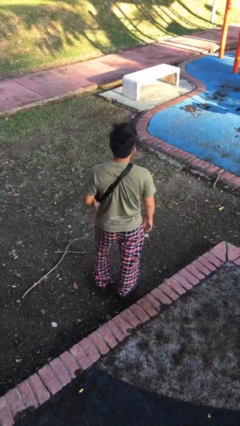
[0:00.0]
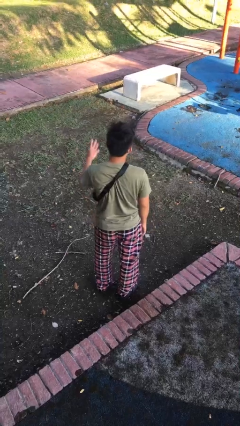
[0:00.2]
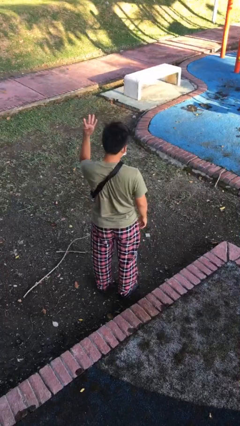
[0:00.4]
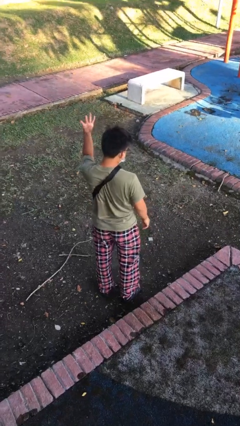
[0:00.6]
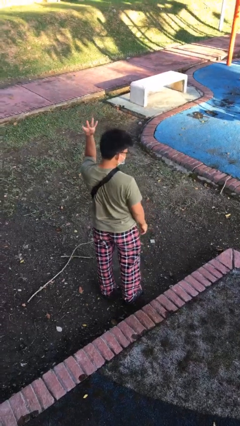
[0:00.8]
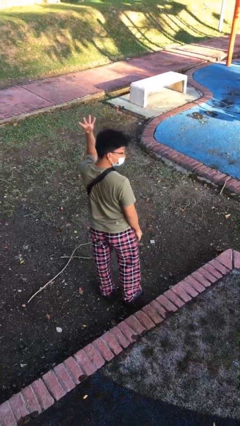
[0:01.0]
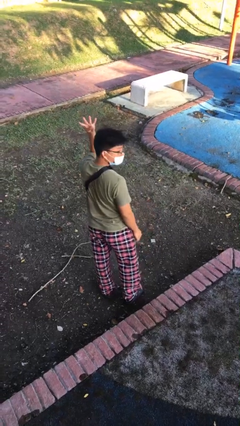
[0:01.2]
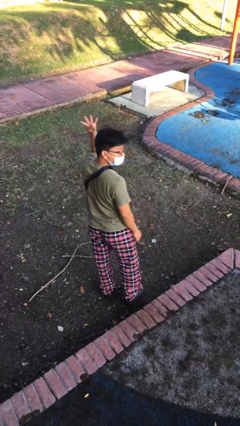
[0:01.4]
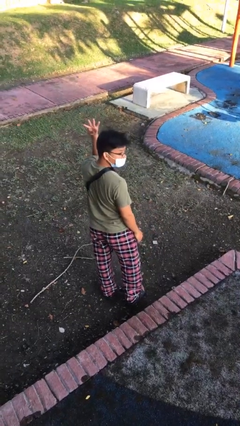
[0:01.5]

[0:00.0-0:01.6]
person gestures number four

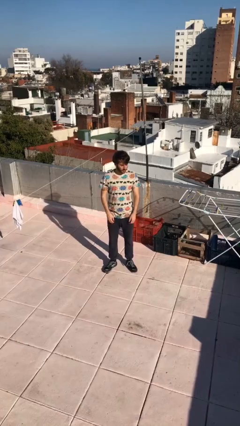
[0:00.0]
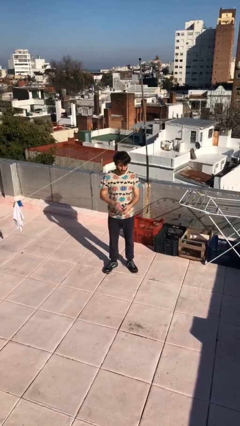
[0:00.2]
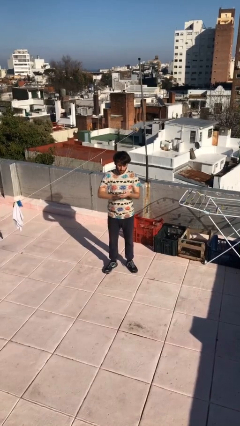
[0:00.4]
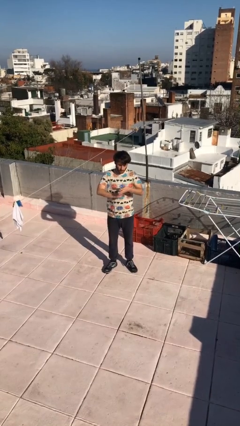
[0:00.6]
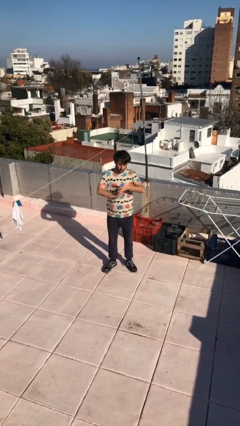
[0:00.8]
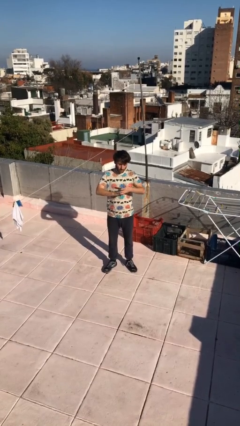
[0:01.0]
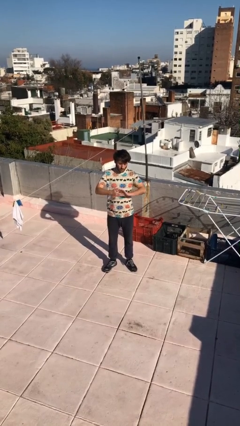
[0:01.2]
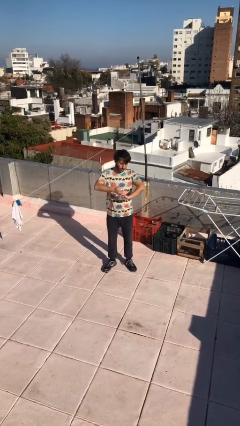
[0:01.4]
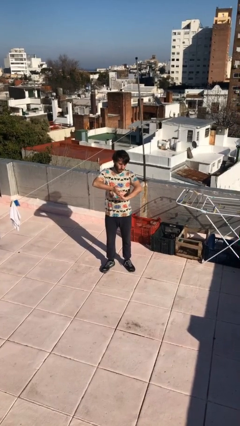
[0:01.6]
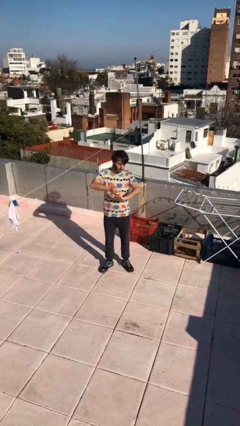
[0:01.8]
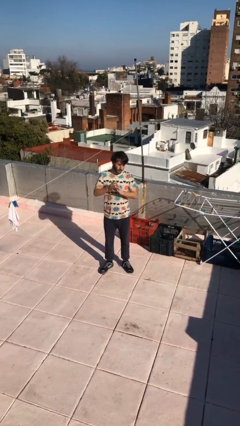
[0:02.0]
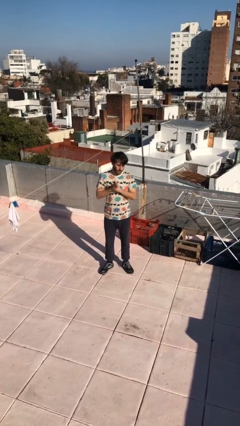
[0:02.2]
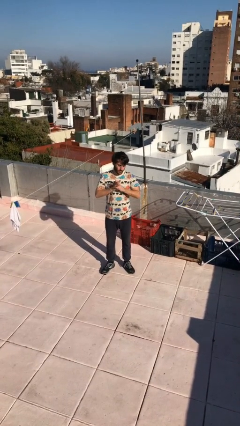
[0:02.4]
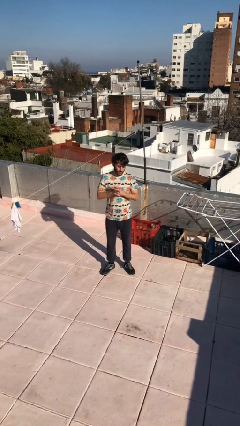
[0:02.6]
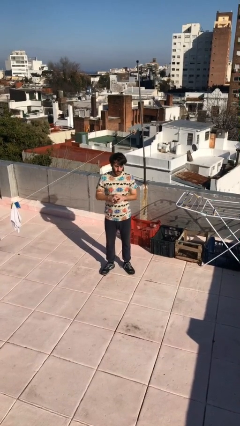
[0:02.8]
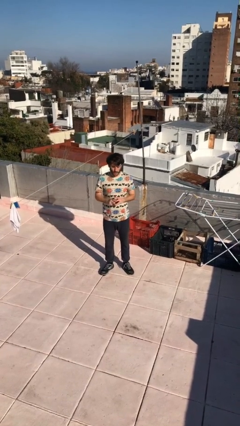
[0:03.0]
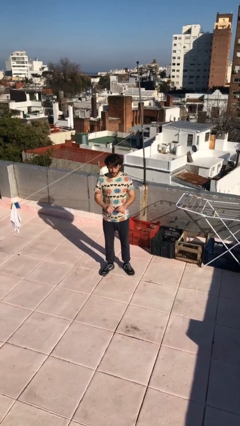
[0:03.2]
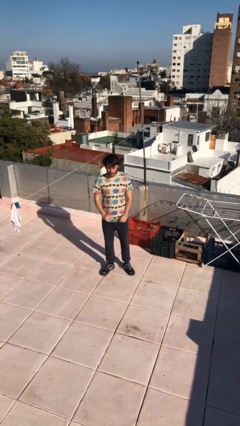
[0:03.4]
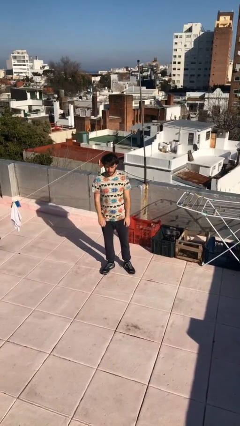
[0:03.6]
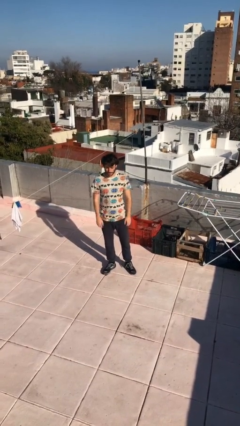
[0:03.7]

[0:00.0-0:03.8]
person cracks knuckles

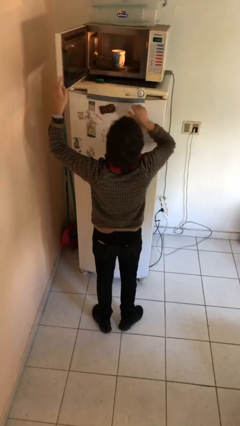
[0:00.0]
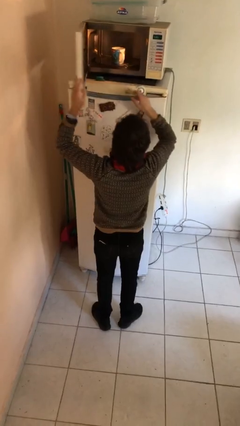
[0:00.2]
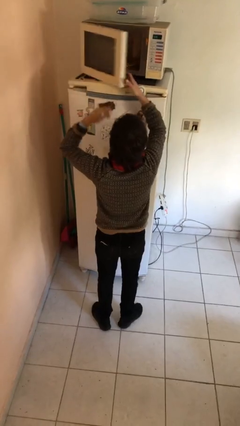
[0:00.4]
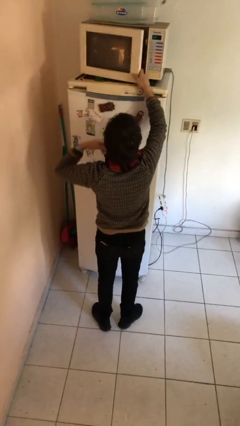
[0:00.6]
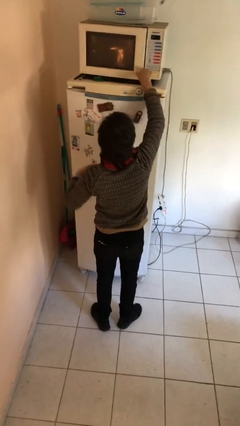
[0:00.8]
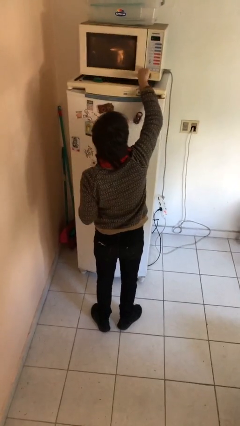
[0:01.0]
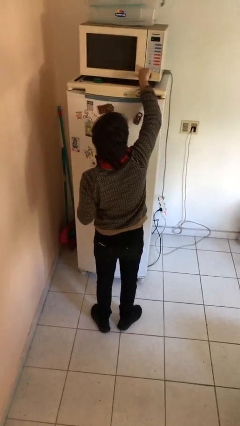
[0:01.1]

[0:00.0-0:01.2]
person closes microwave

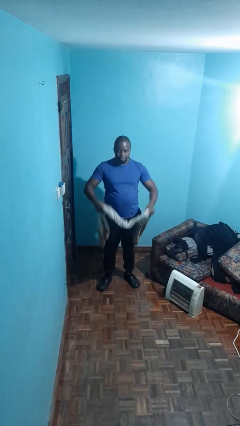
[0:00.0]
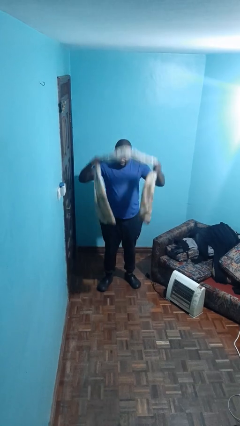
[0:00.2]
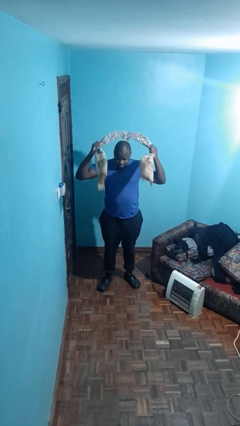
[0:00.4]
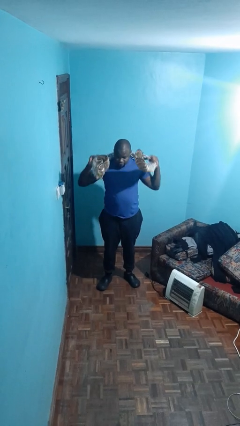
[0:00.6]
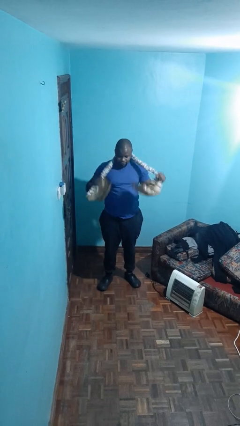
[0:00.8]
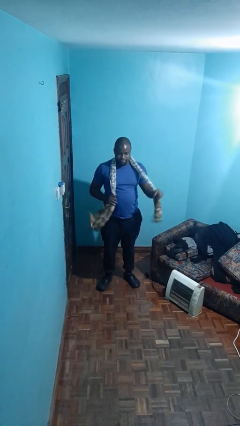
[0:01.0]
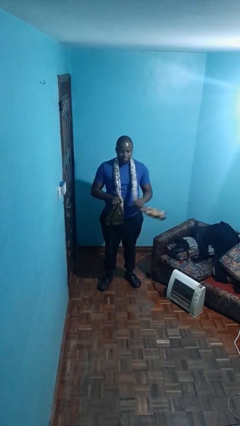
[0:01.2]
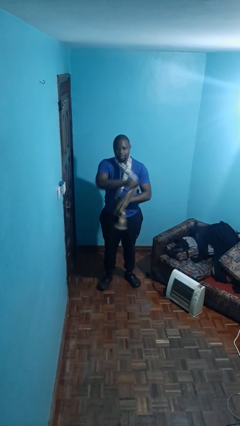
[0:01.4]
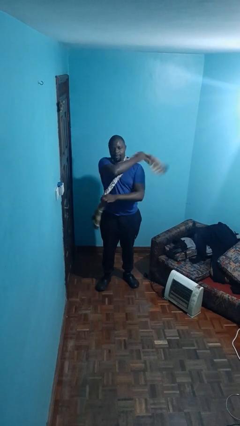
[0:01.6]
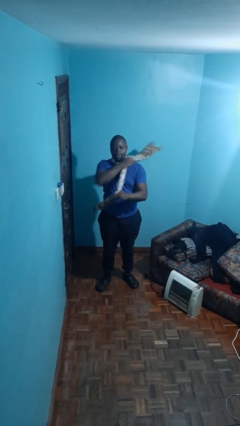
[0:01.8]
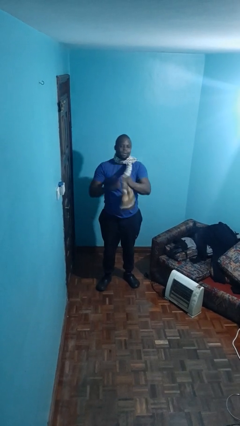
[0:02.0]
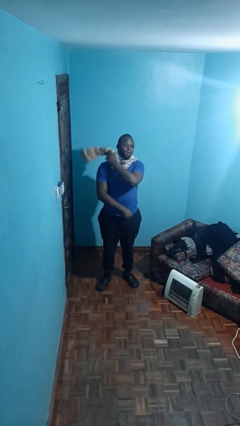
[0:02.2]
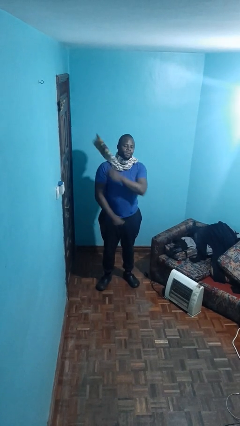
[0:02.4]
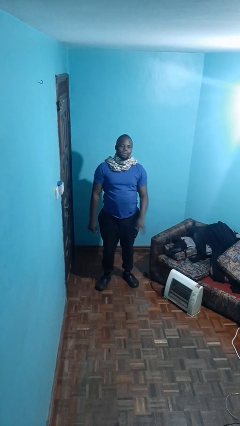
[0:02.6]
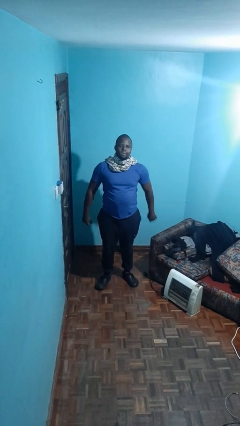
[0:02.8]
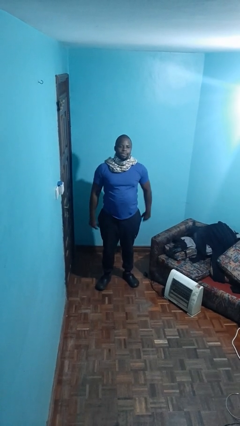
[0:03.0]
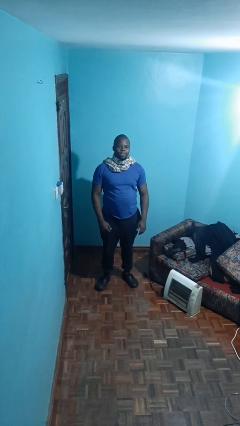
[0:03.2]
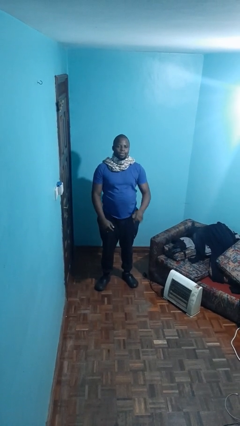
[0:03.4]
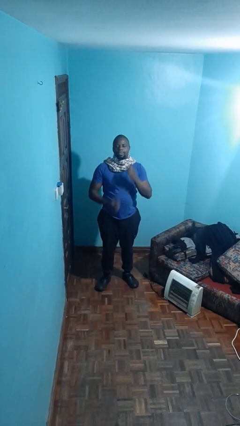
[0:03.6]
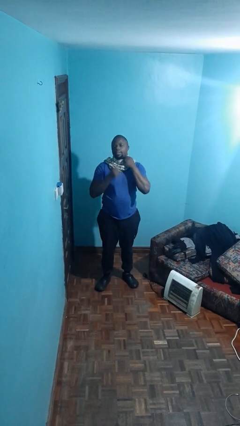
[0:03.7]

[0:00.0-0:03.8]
person puts on scarf

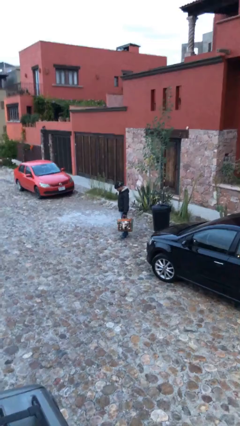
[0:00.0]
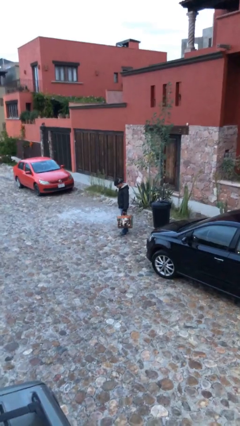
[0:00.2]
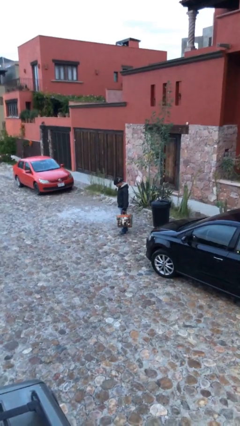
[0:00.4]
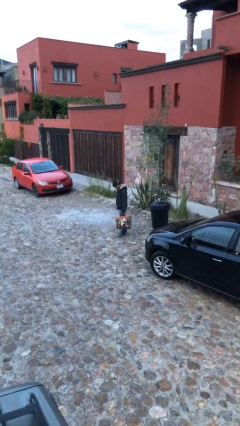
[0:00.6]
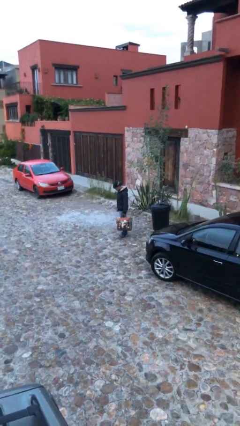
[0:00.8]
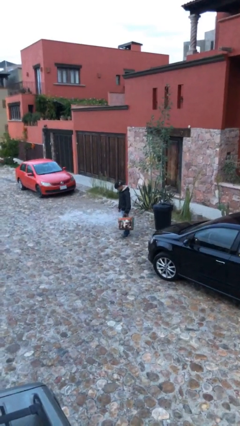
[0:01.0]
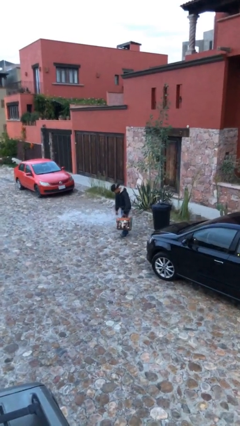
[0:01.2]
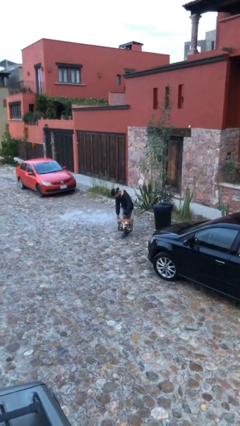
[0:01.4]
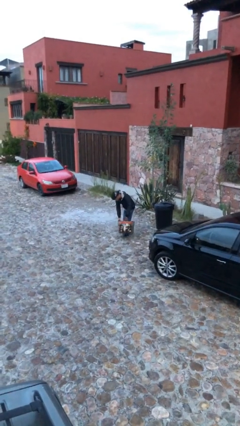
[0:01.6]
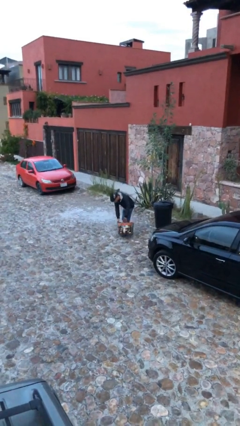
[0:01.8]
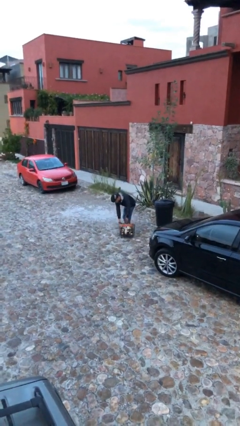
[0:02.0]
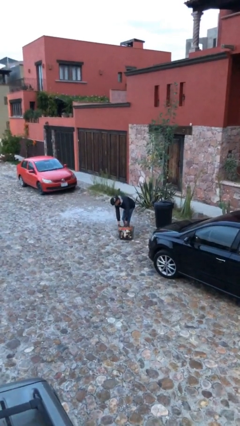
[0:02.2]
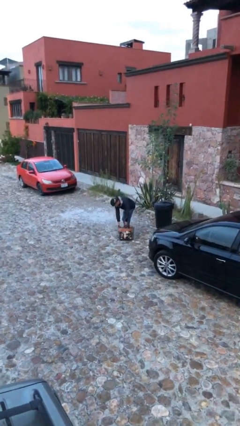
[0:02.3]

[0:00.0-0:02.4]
person puts down object on floor

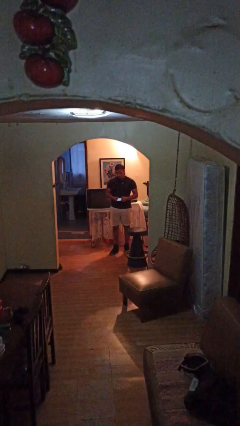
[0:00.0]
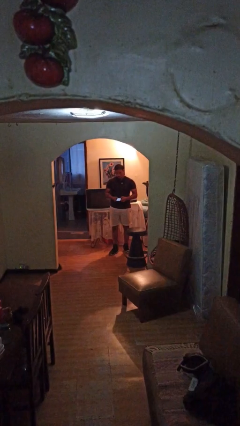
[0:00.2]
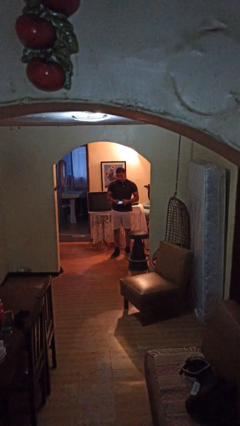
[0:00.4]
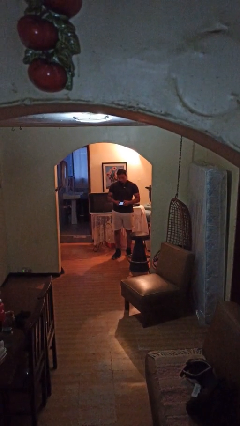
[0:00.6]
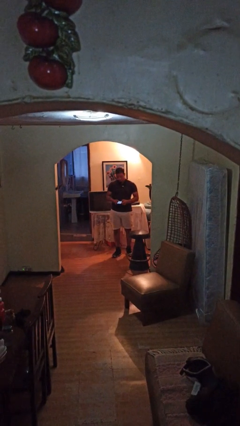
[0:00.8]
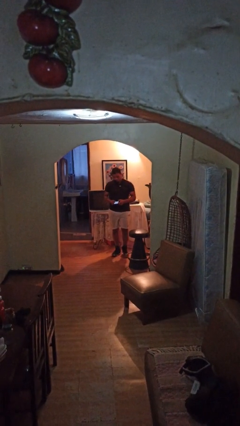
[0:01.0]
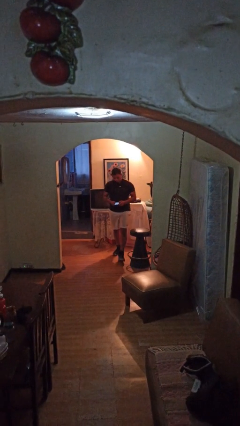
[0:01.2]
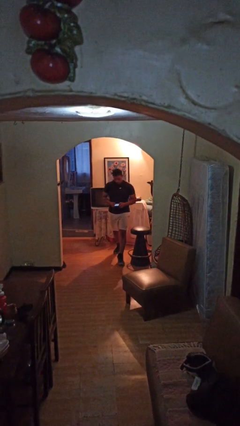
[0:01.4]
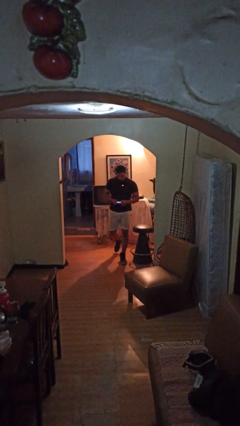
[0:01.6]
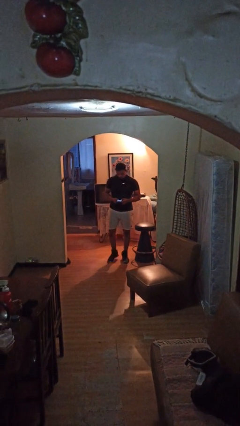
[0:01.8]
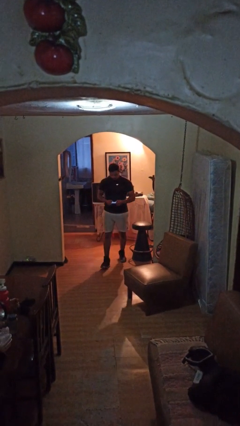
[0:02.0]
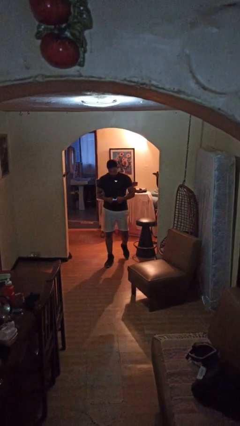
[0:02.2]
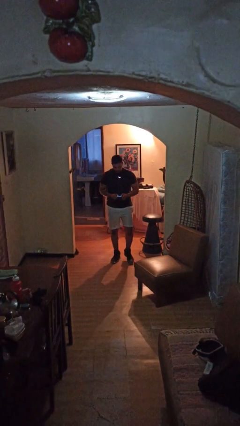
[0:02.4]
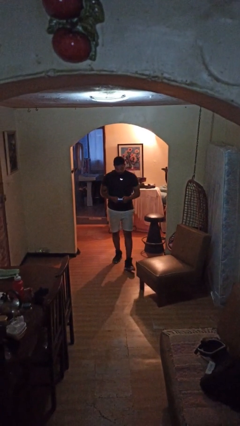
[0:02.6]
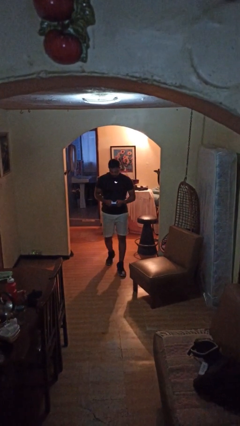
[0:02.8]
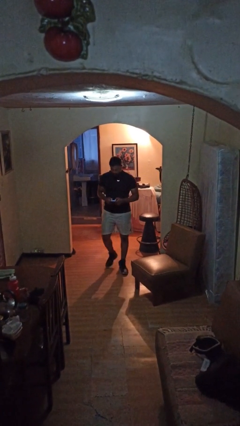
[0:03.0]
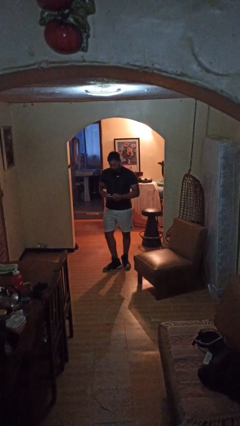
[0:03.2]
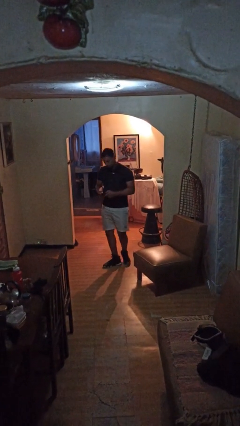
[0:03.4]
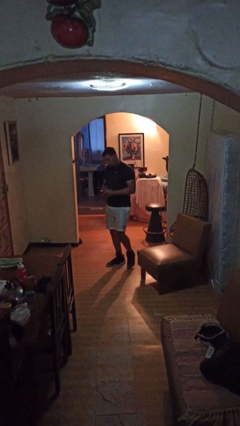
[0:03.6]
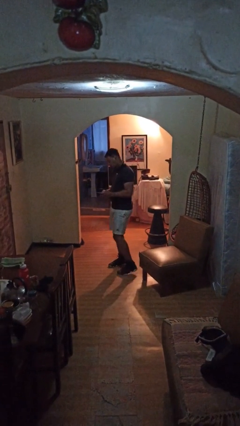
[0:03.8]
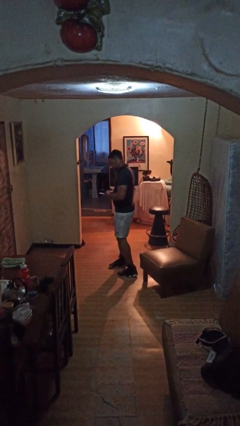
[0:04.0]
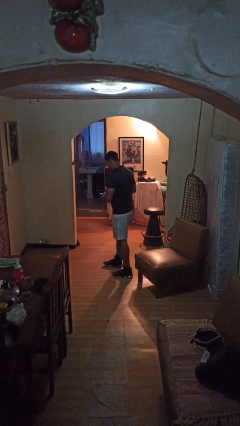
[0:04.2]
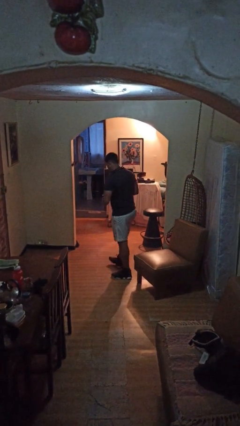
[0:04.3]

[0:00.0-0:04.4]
person enters scene through structure

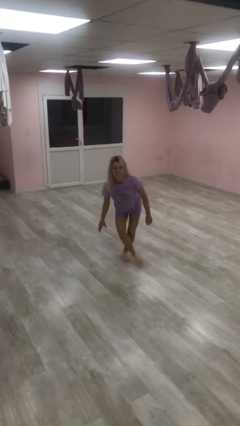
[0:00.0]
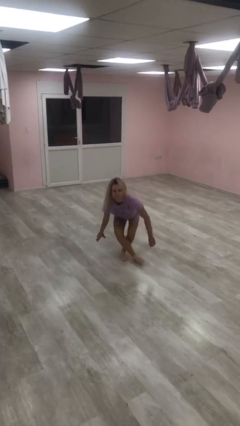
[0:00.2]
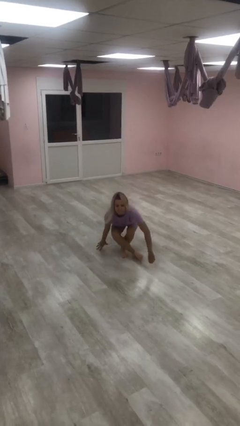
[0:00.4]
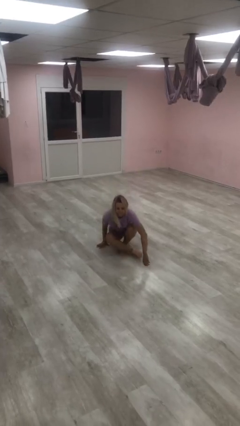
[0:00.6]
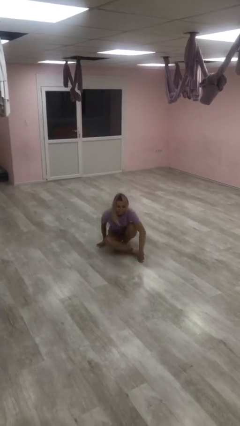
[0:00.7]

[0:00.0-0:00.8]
person sits crisscross
